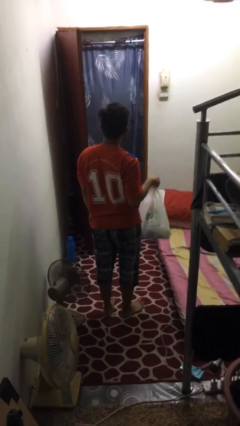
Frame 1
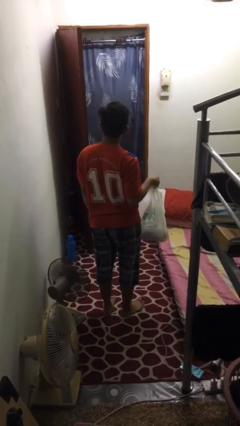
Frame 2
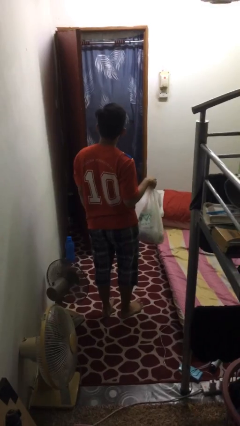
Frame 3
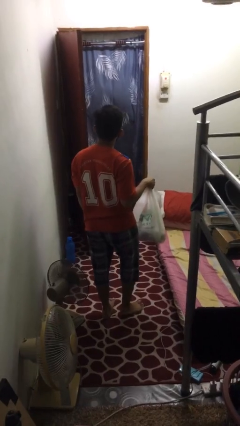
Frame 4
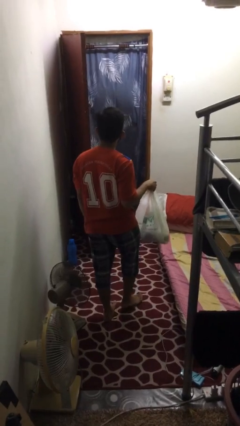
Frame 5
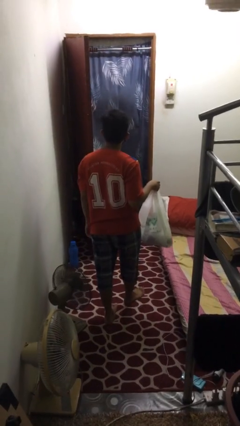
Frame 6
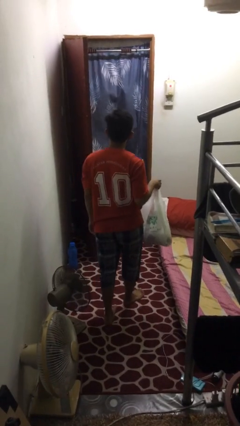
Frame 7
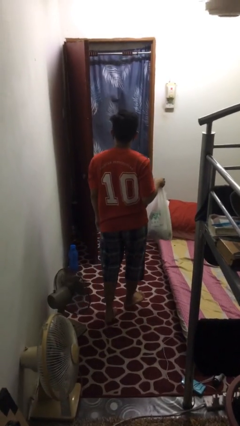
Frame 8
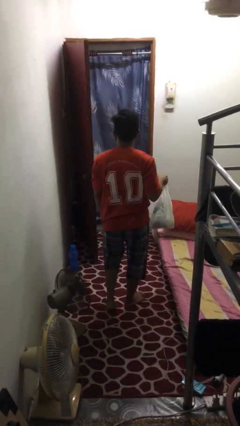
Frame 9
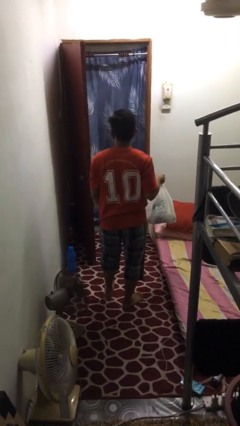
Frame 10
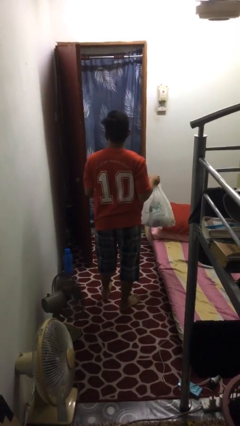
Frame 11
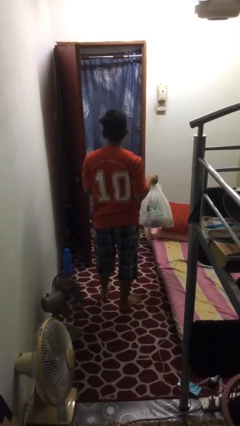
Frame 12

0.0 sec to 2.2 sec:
person carries groceries

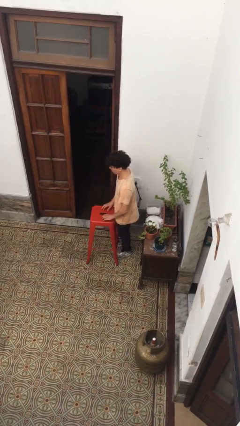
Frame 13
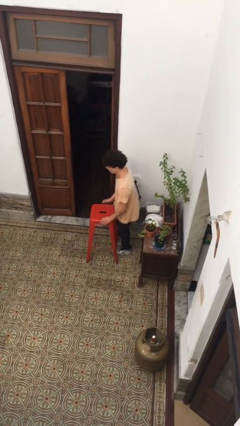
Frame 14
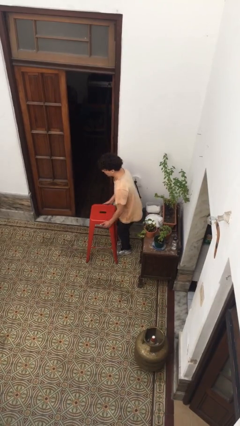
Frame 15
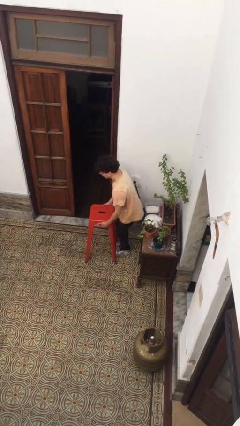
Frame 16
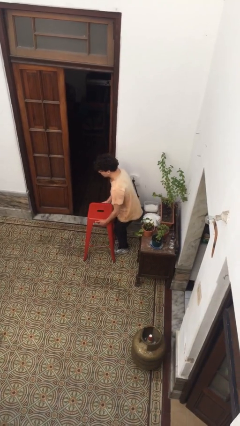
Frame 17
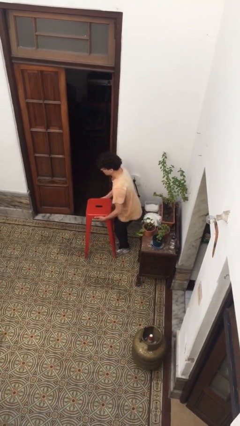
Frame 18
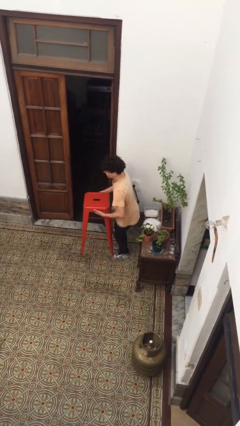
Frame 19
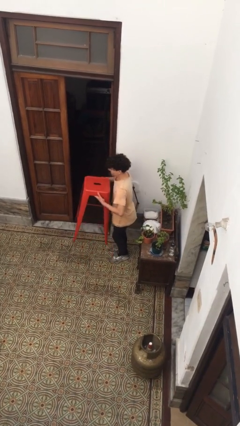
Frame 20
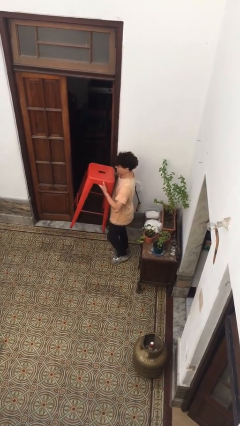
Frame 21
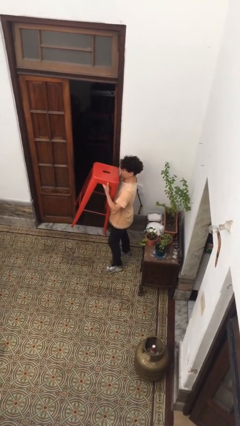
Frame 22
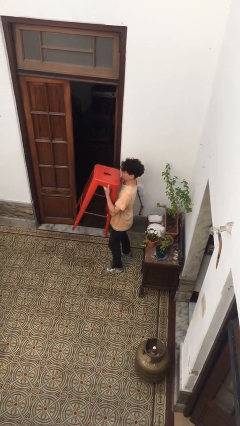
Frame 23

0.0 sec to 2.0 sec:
person picks up object from floor

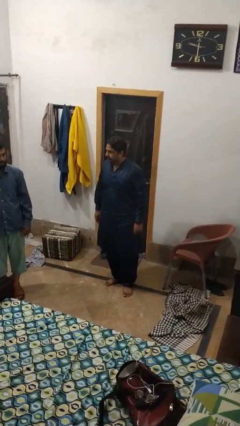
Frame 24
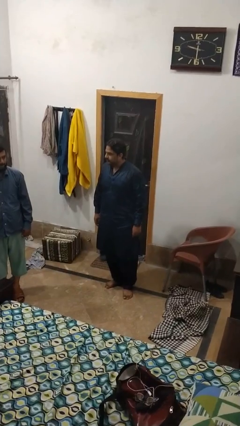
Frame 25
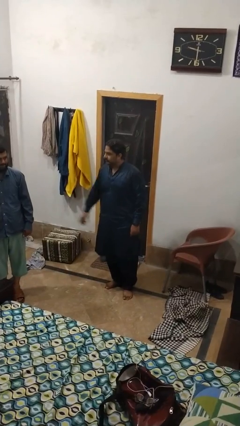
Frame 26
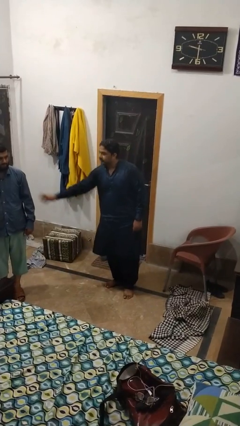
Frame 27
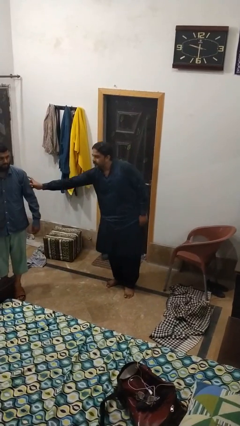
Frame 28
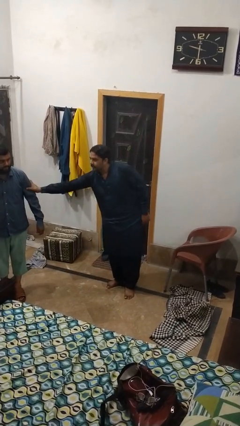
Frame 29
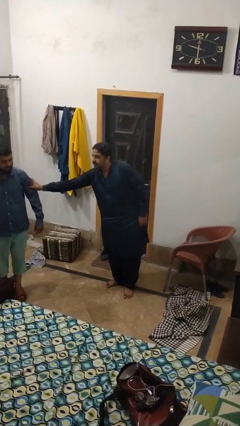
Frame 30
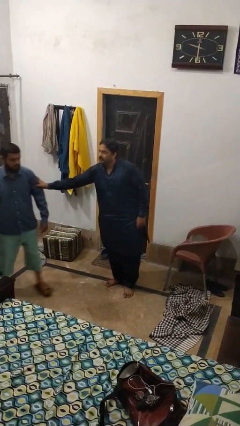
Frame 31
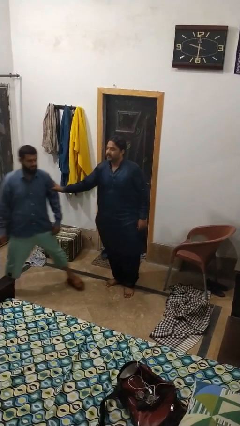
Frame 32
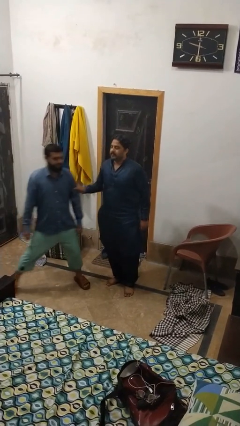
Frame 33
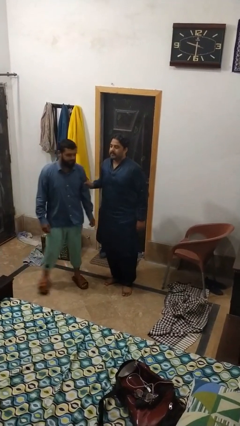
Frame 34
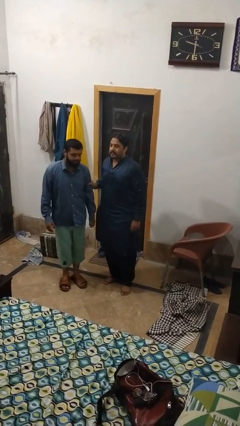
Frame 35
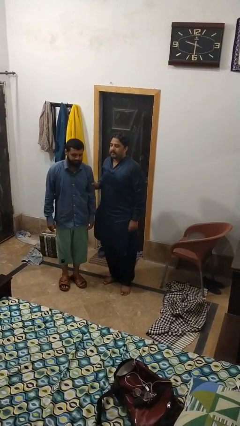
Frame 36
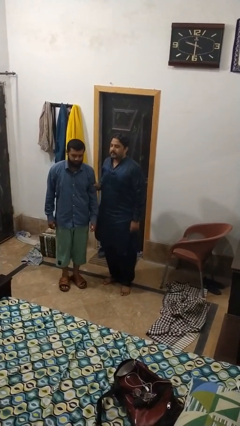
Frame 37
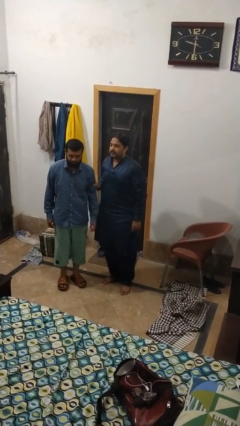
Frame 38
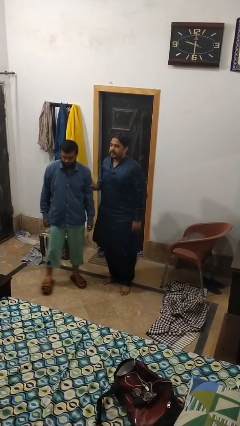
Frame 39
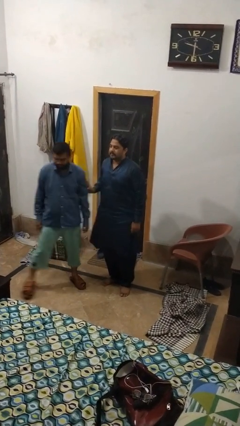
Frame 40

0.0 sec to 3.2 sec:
person grabs person by hair

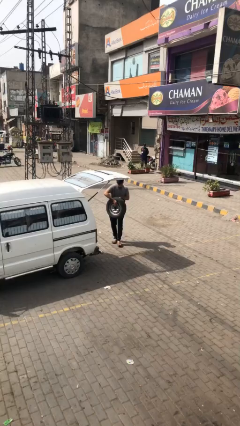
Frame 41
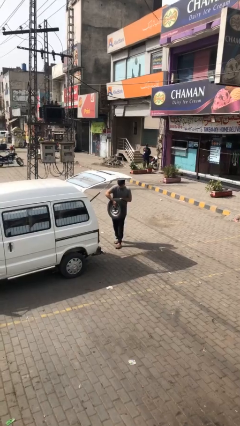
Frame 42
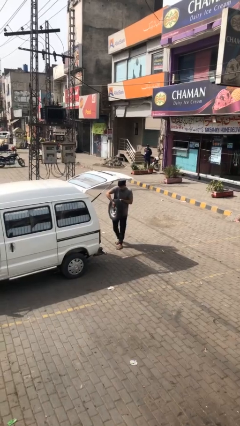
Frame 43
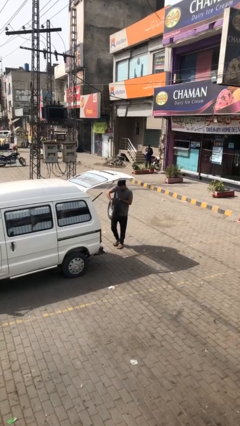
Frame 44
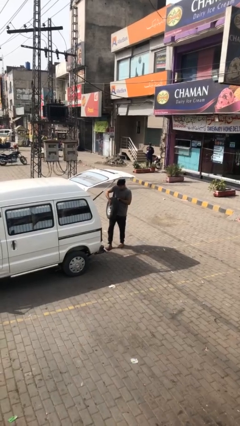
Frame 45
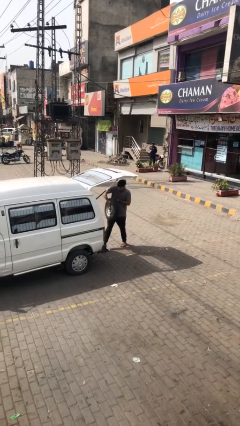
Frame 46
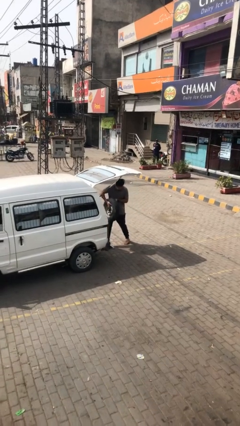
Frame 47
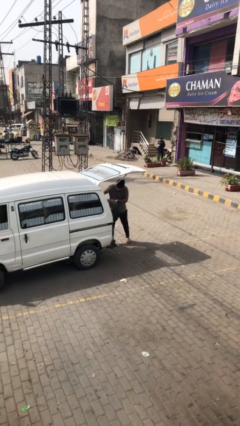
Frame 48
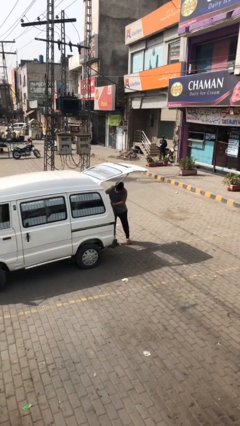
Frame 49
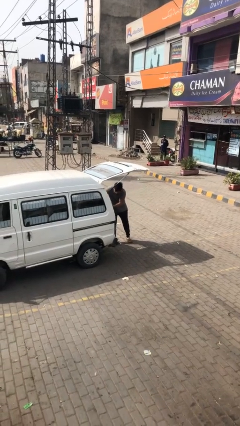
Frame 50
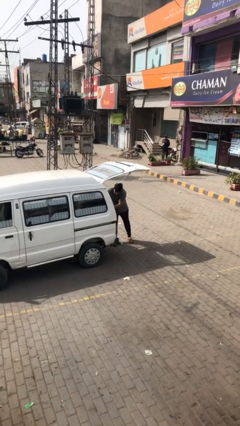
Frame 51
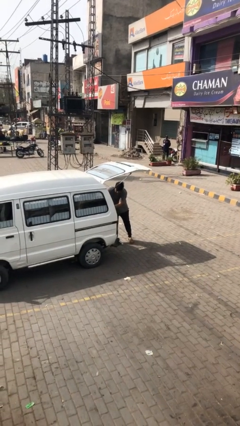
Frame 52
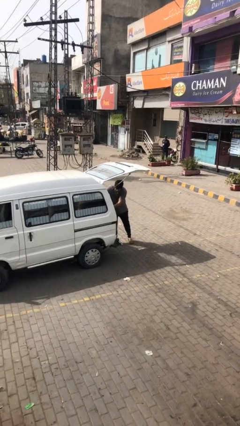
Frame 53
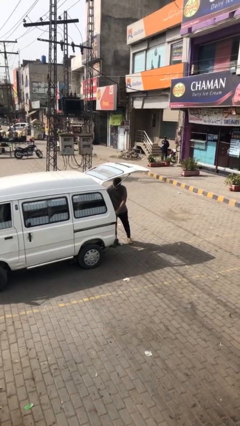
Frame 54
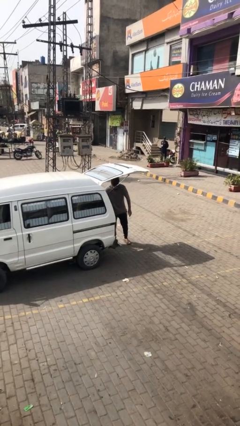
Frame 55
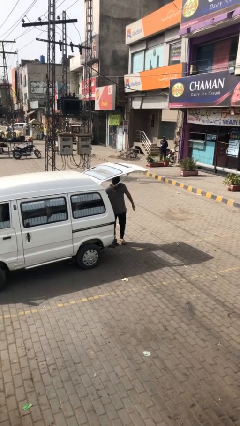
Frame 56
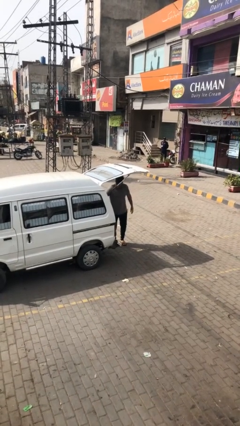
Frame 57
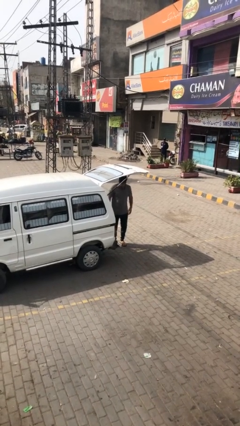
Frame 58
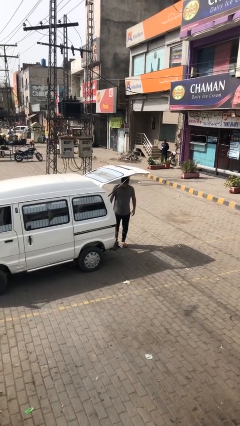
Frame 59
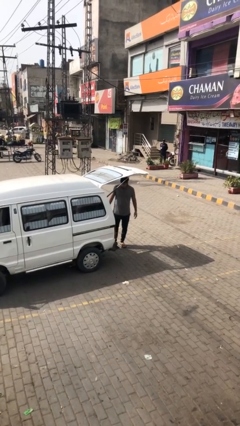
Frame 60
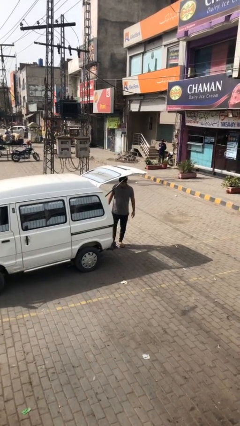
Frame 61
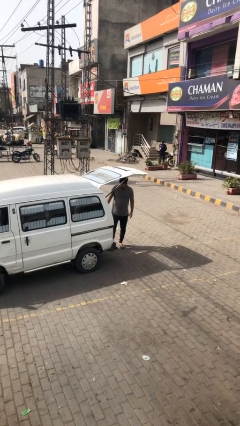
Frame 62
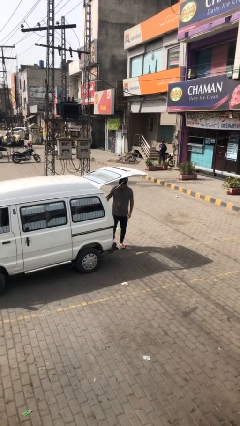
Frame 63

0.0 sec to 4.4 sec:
person loads car

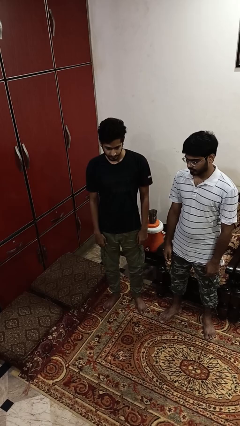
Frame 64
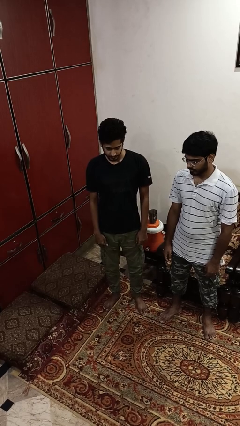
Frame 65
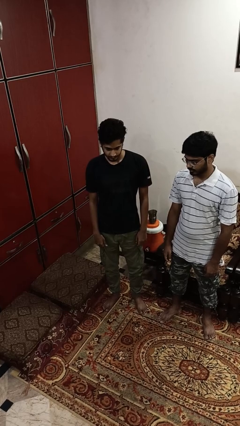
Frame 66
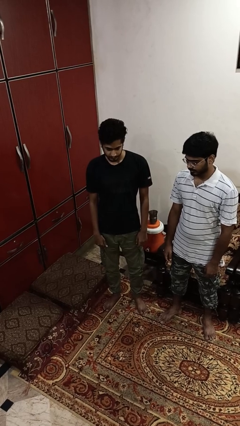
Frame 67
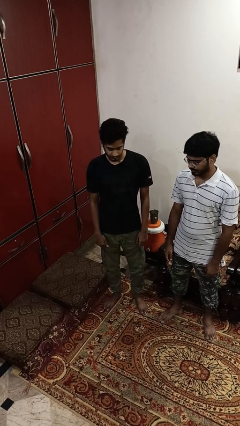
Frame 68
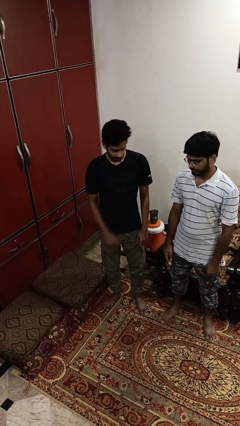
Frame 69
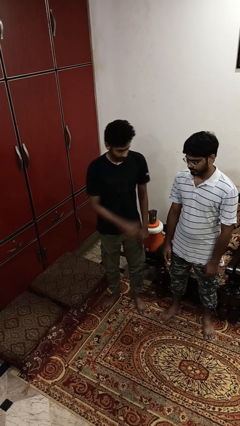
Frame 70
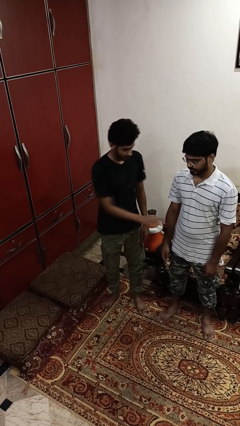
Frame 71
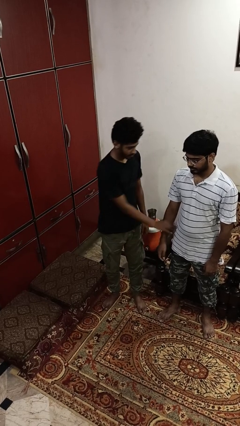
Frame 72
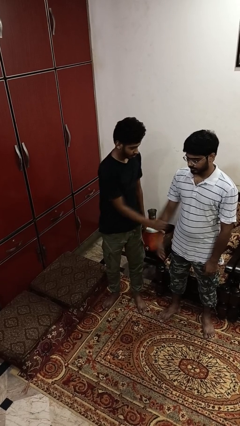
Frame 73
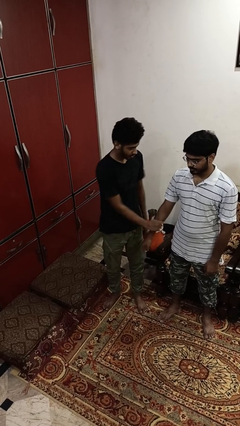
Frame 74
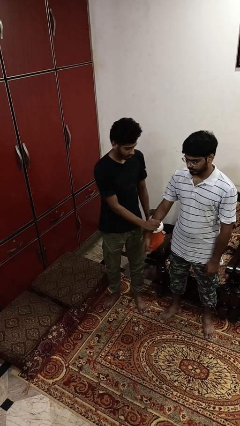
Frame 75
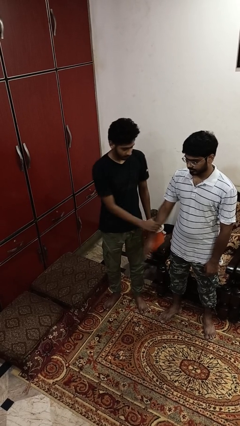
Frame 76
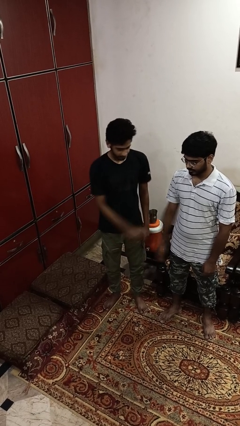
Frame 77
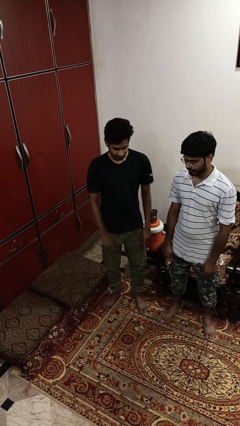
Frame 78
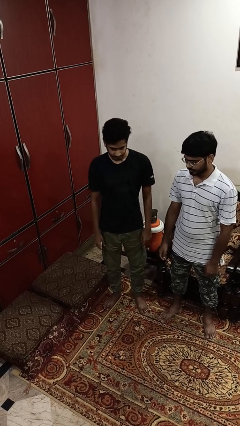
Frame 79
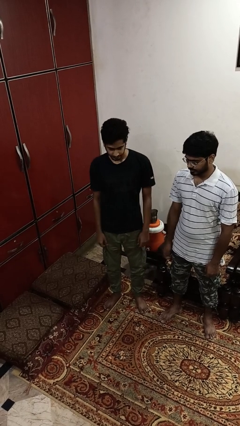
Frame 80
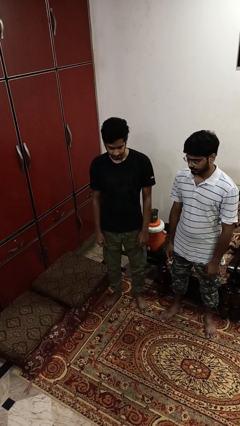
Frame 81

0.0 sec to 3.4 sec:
person grabs person by forearm

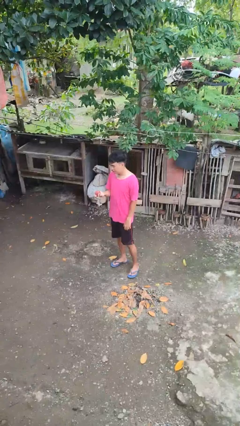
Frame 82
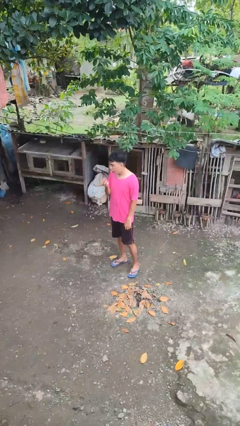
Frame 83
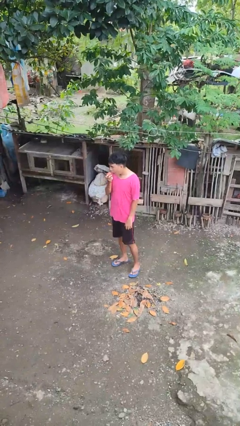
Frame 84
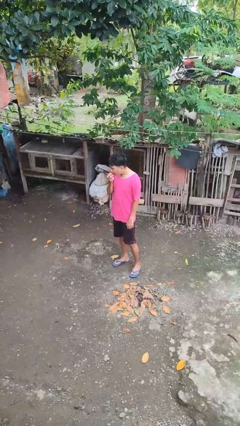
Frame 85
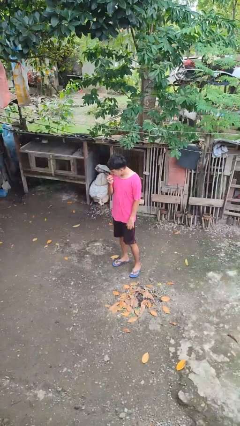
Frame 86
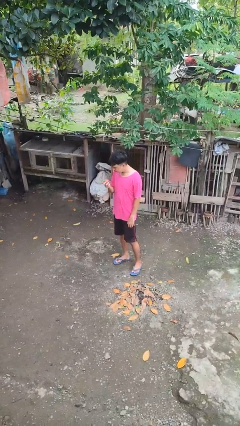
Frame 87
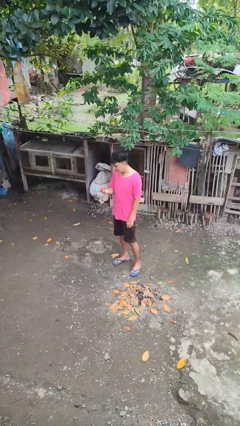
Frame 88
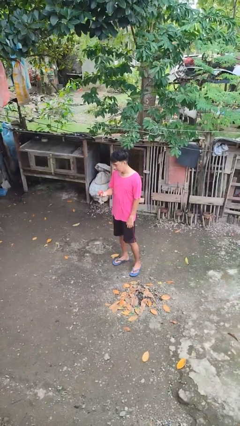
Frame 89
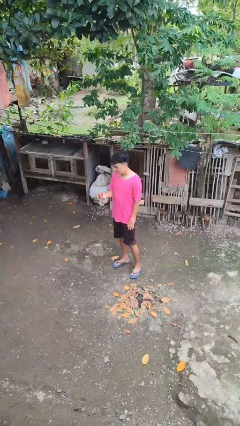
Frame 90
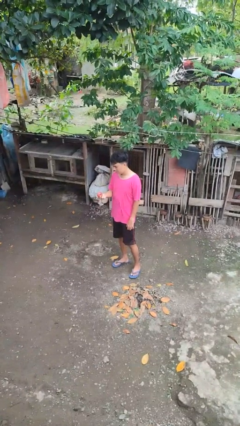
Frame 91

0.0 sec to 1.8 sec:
person eats apple

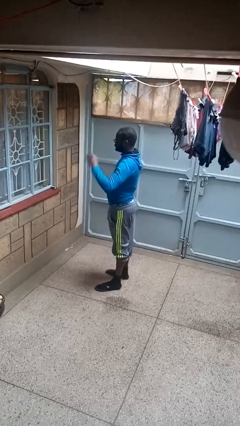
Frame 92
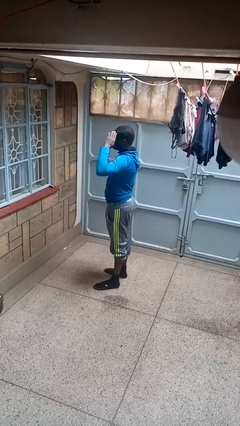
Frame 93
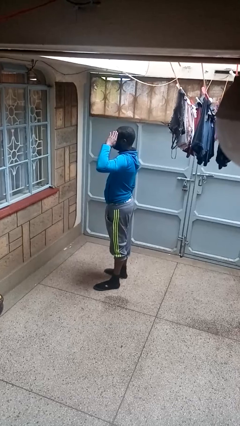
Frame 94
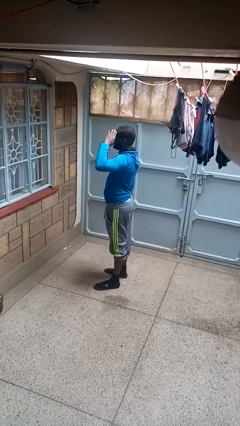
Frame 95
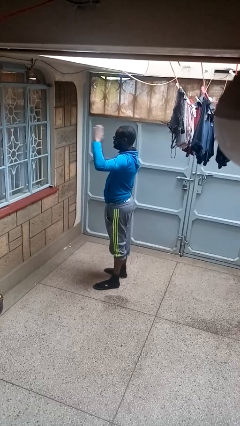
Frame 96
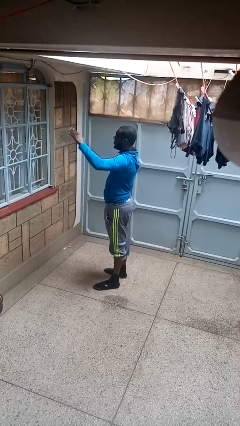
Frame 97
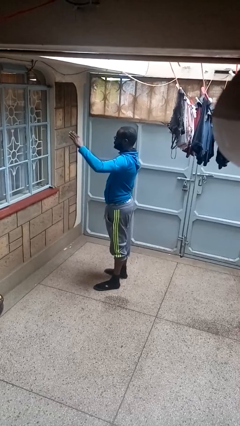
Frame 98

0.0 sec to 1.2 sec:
person salutes
